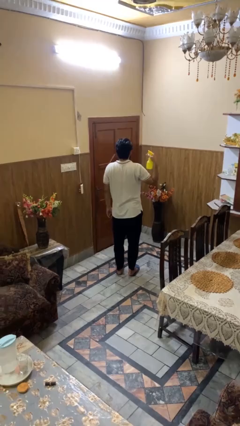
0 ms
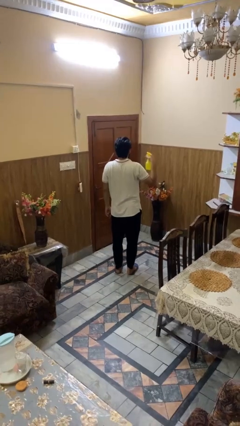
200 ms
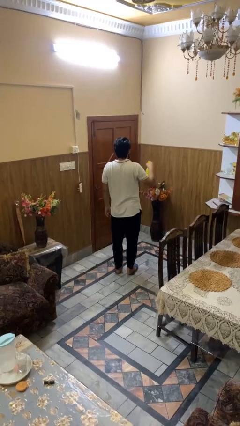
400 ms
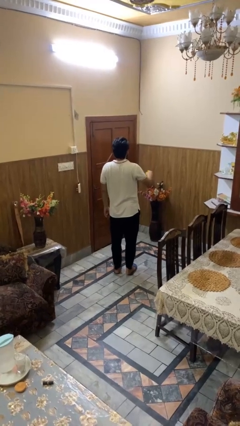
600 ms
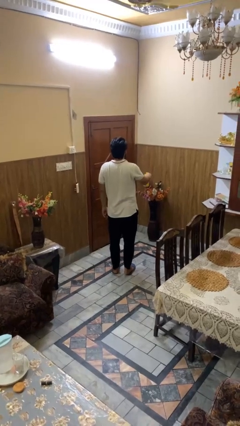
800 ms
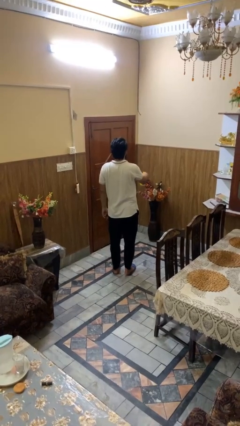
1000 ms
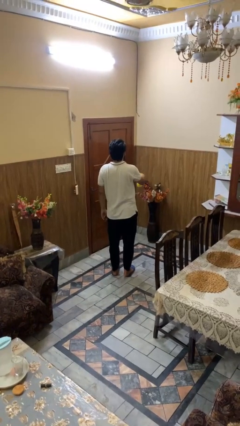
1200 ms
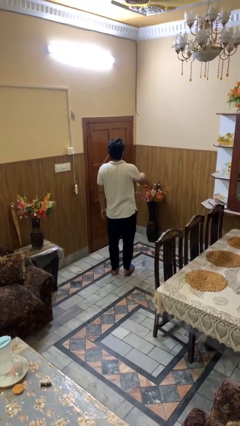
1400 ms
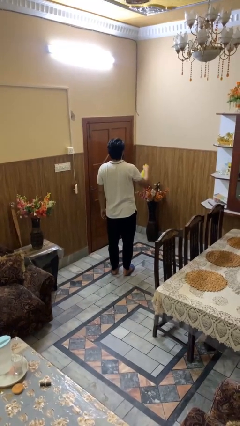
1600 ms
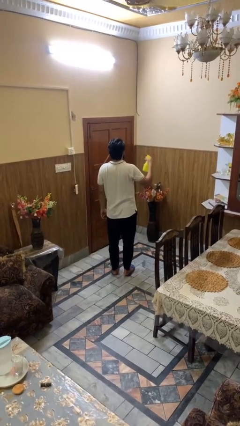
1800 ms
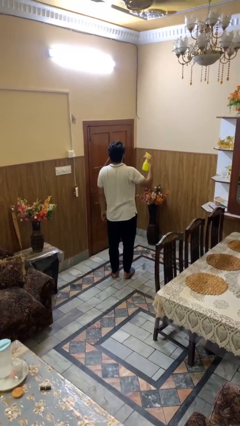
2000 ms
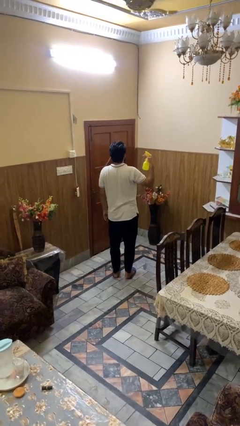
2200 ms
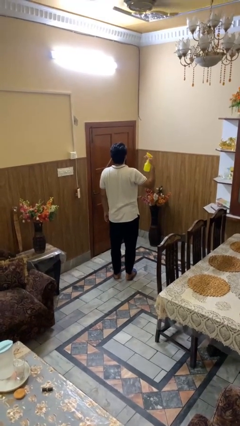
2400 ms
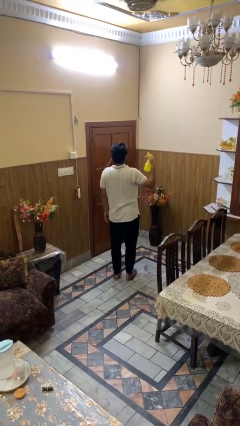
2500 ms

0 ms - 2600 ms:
person sprays from bottle

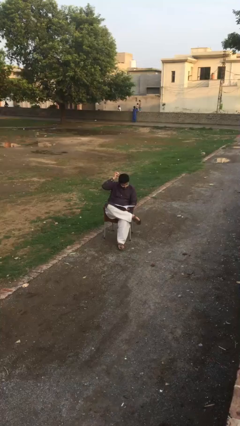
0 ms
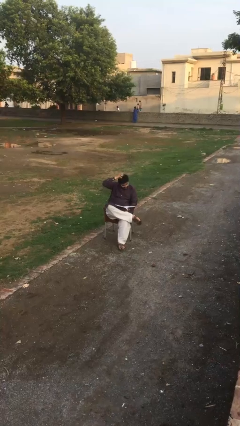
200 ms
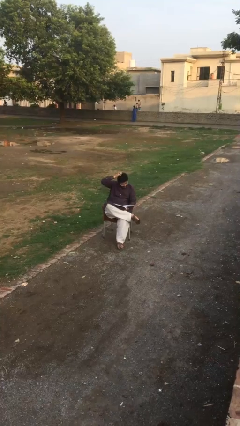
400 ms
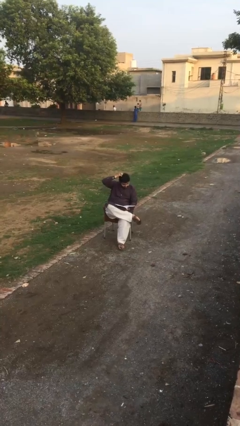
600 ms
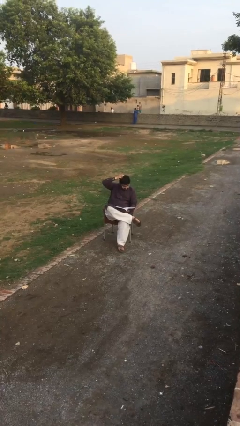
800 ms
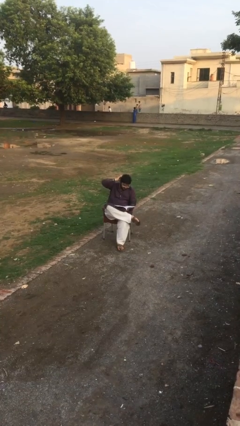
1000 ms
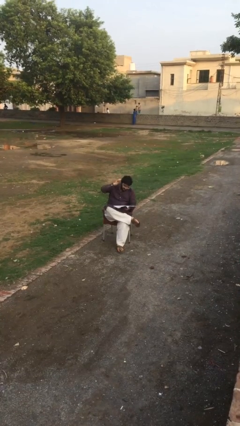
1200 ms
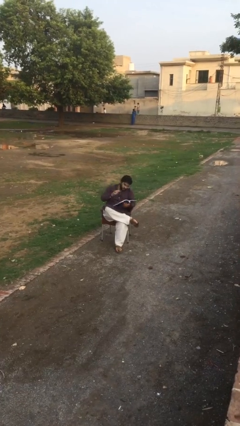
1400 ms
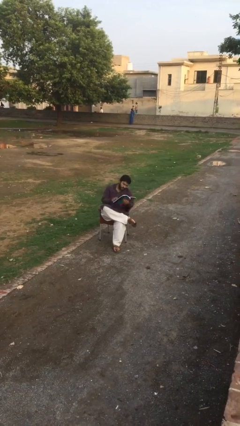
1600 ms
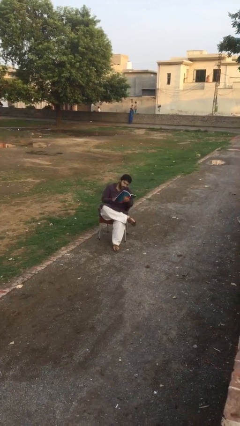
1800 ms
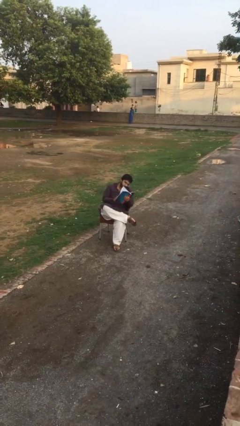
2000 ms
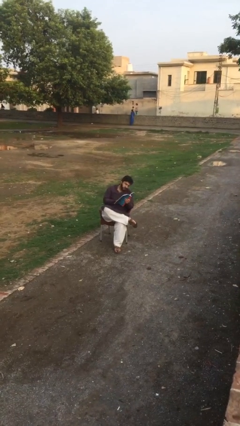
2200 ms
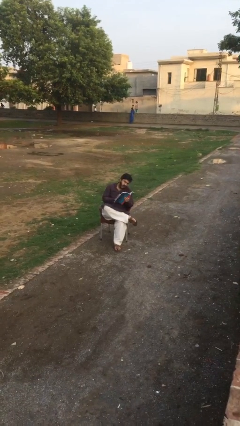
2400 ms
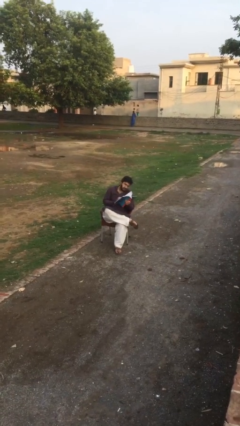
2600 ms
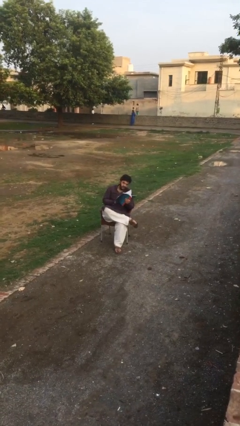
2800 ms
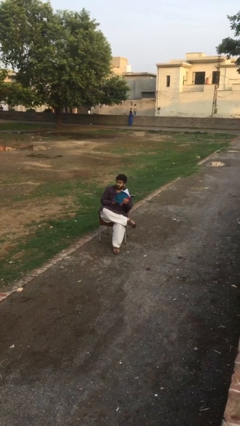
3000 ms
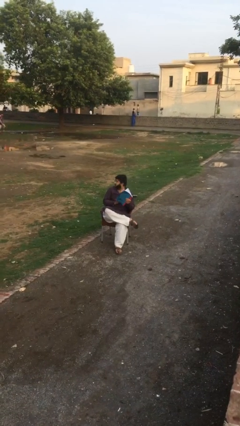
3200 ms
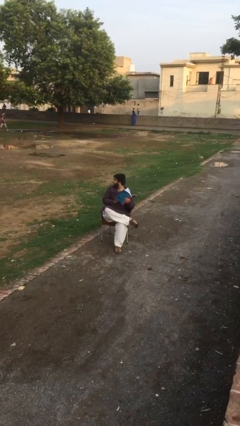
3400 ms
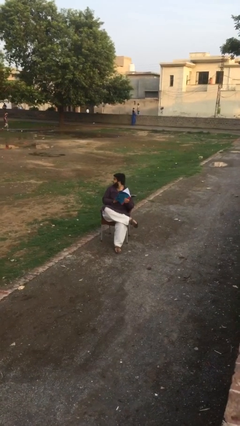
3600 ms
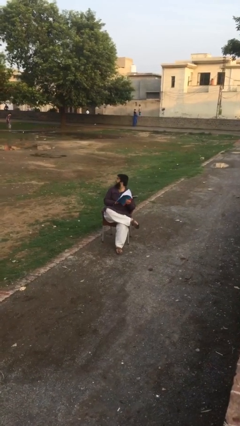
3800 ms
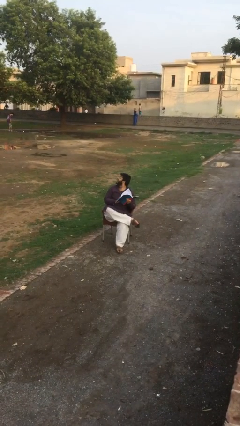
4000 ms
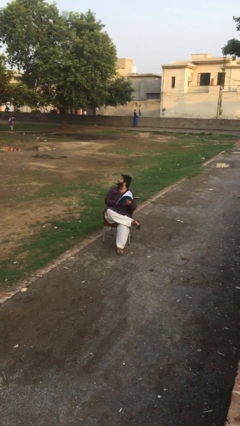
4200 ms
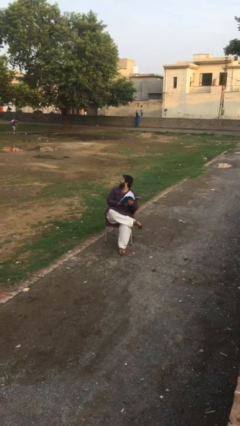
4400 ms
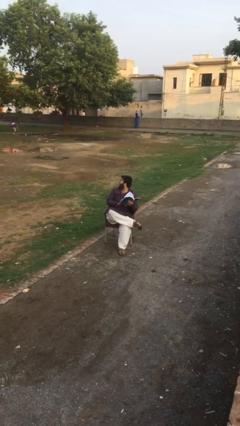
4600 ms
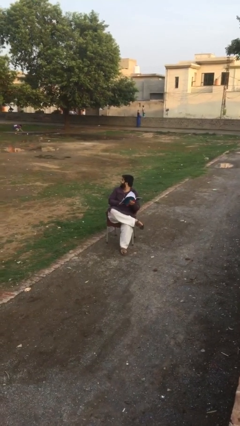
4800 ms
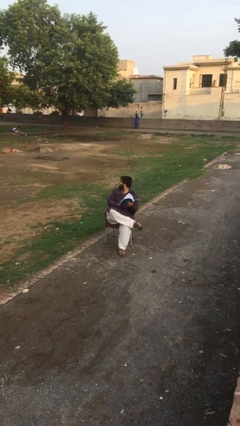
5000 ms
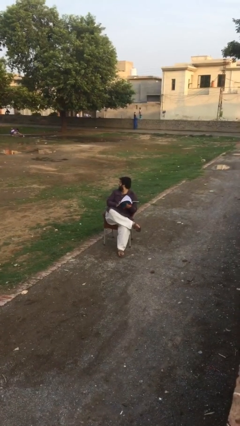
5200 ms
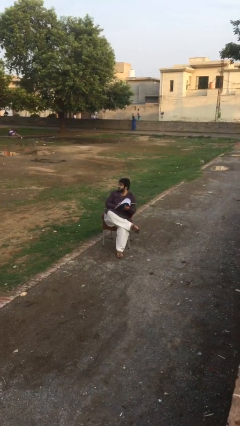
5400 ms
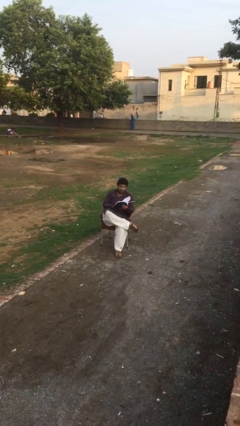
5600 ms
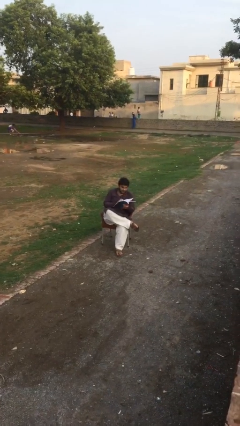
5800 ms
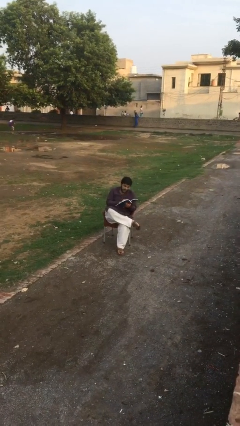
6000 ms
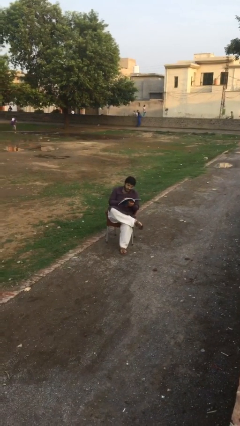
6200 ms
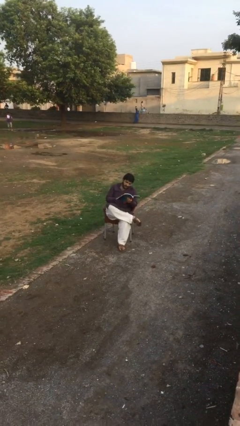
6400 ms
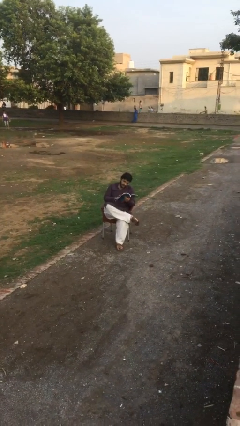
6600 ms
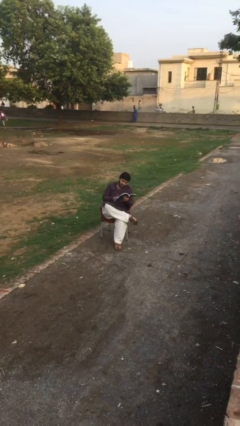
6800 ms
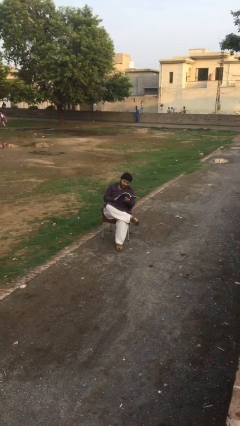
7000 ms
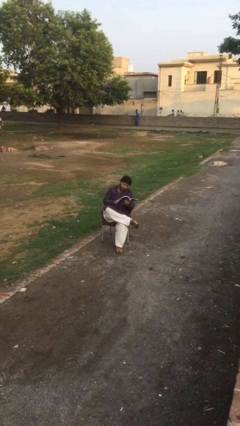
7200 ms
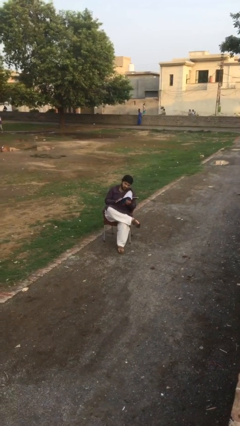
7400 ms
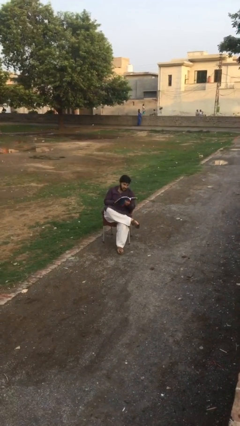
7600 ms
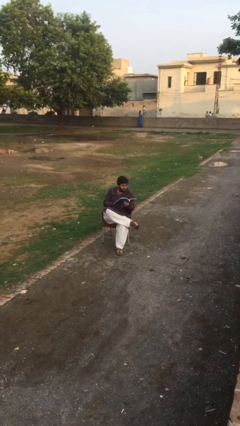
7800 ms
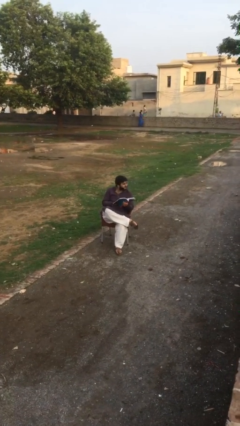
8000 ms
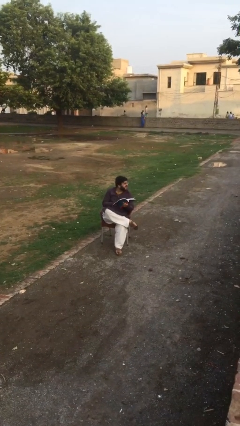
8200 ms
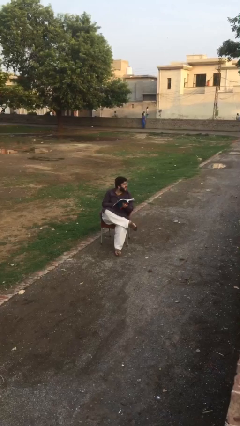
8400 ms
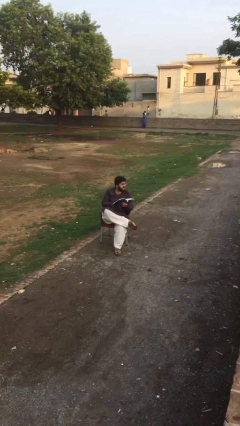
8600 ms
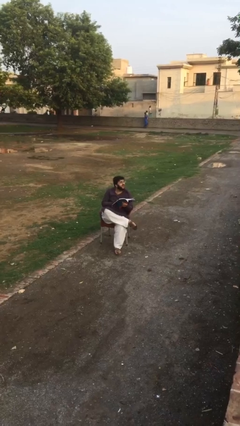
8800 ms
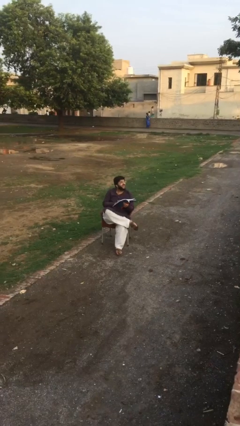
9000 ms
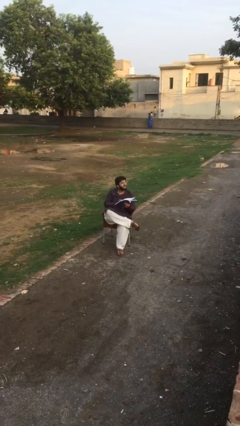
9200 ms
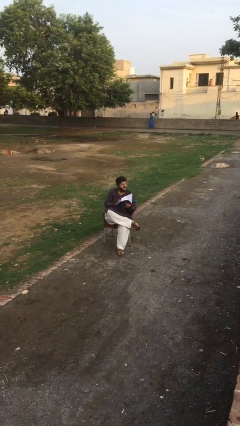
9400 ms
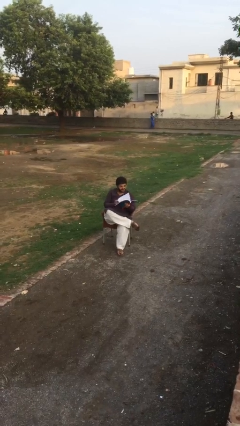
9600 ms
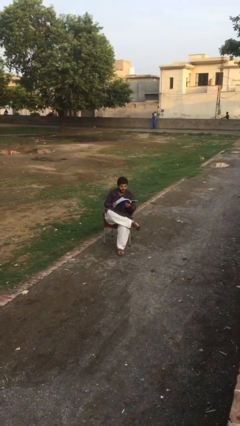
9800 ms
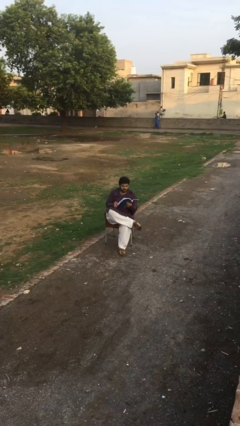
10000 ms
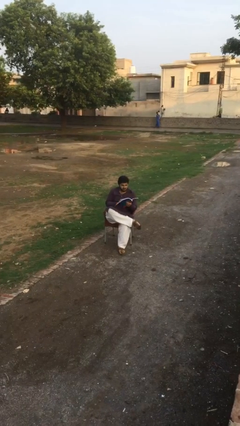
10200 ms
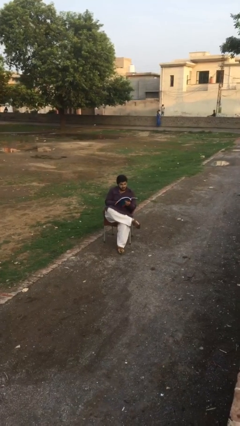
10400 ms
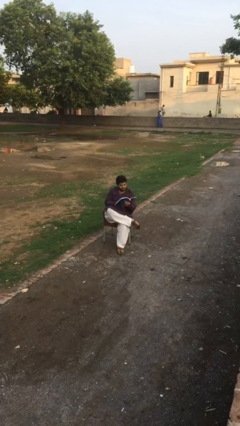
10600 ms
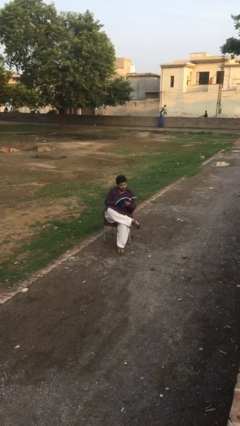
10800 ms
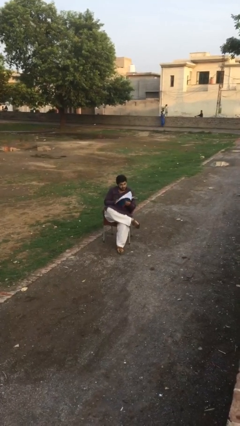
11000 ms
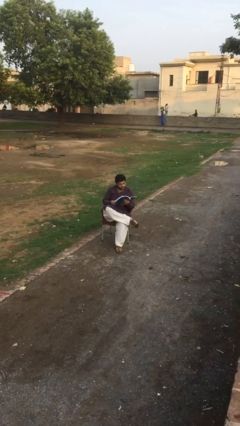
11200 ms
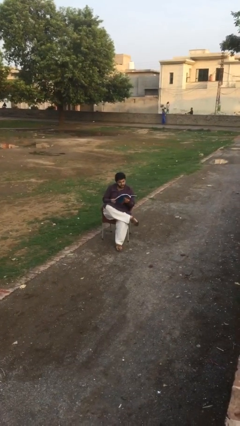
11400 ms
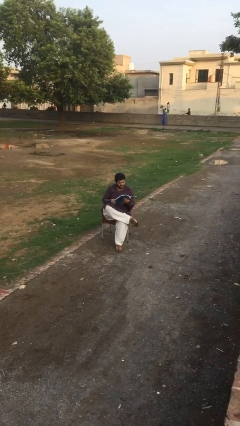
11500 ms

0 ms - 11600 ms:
person reads document

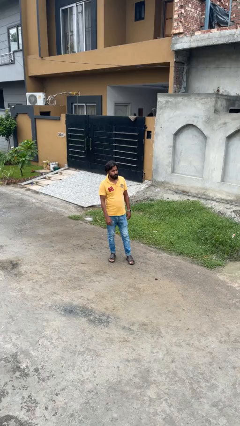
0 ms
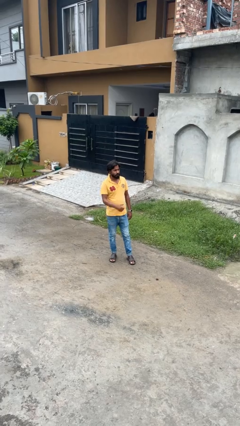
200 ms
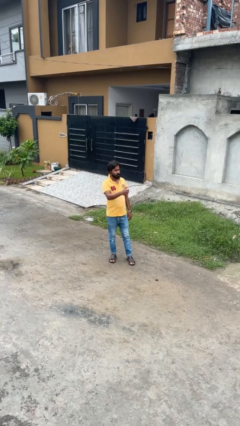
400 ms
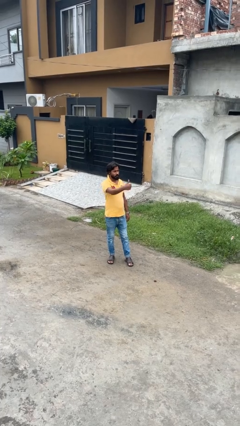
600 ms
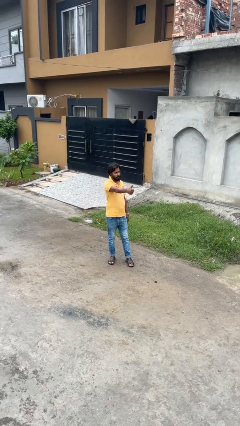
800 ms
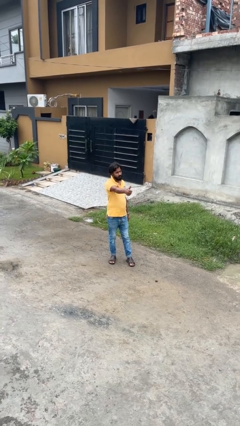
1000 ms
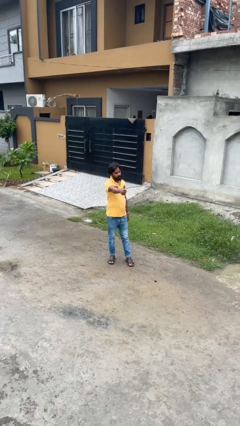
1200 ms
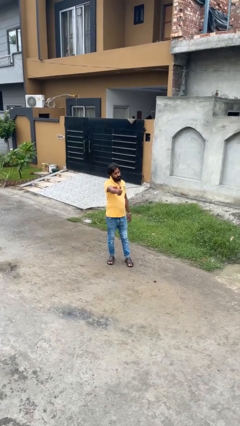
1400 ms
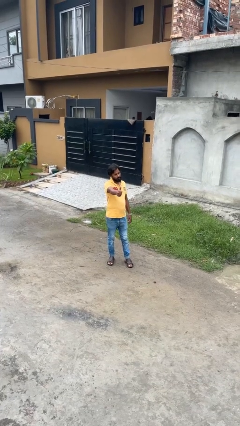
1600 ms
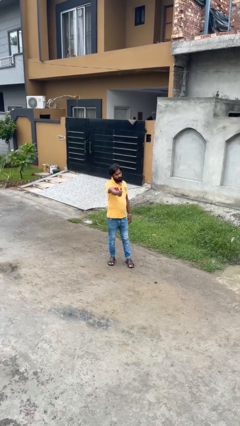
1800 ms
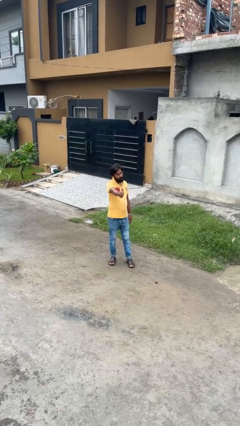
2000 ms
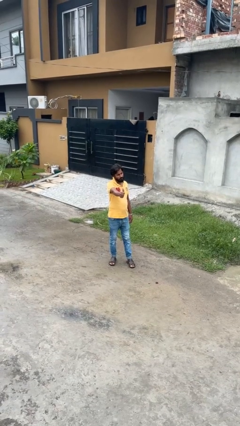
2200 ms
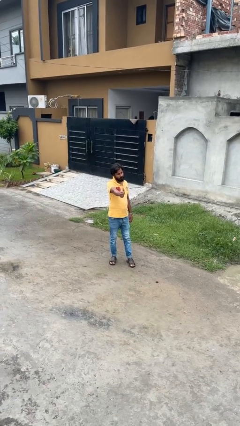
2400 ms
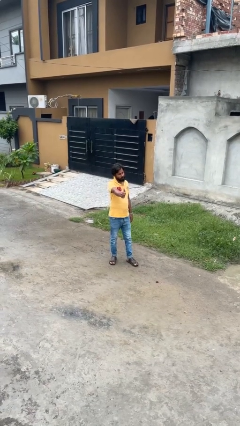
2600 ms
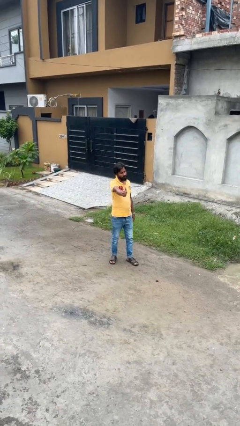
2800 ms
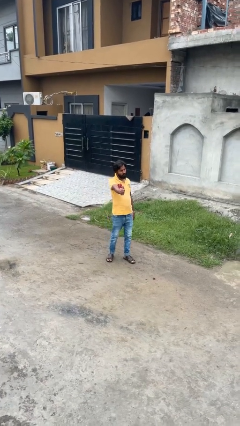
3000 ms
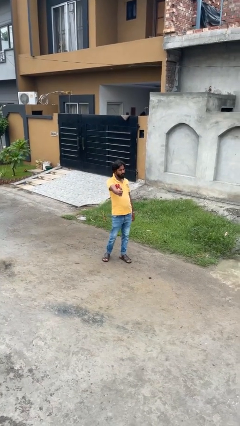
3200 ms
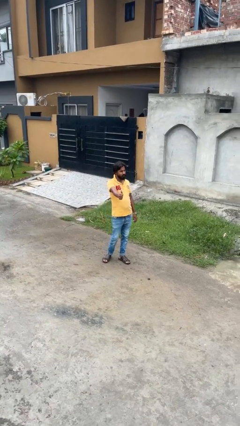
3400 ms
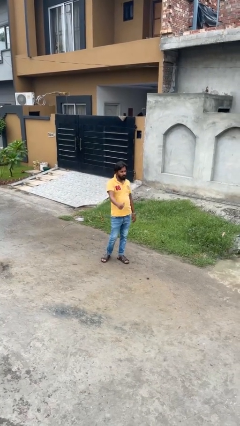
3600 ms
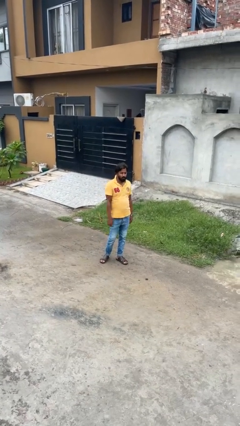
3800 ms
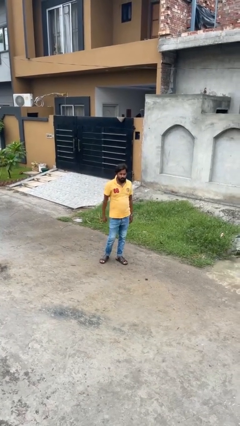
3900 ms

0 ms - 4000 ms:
person gestures thumbs up
